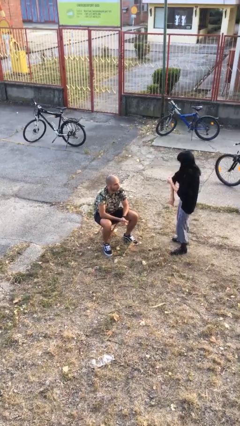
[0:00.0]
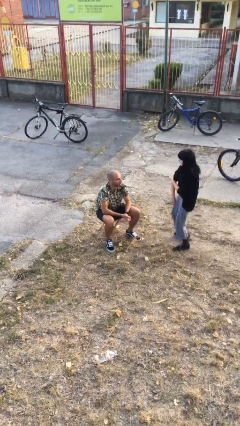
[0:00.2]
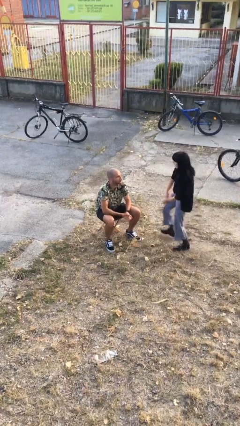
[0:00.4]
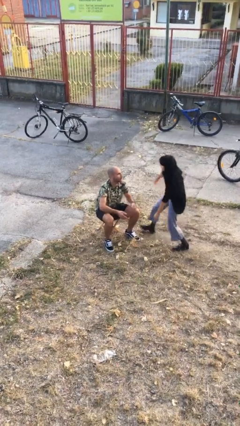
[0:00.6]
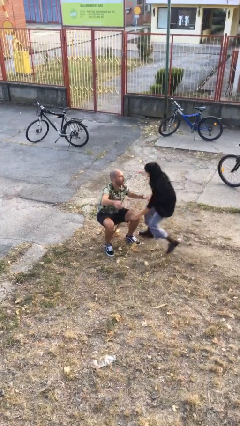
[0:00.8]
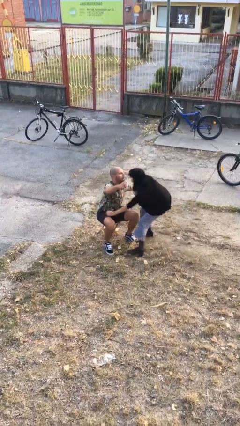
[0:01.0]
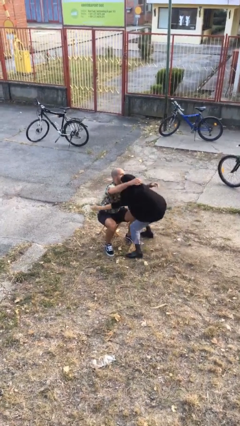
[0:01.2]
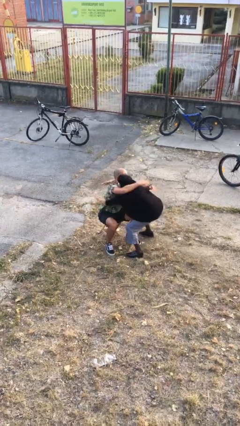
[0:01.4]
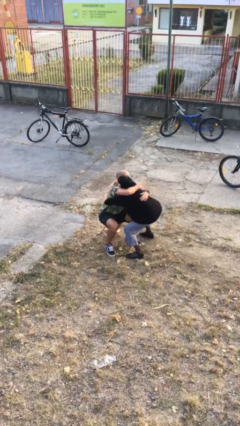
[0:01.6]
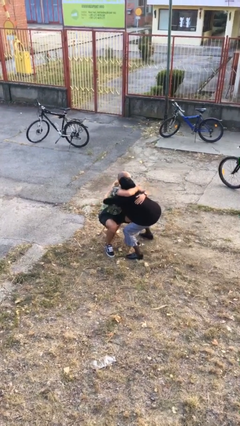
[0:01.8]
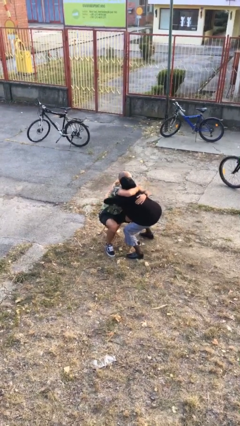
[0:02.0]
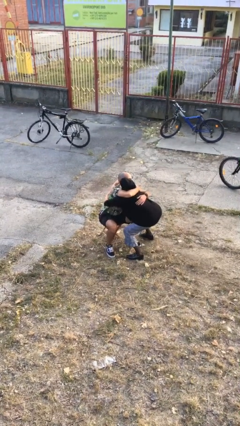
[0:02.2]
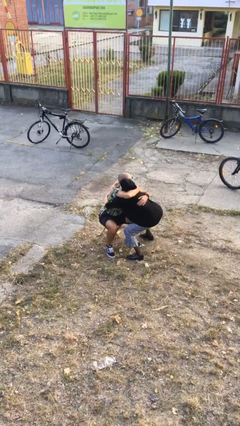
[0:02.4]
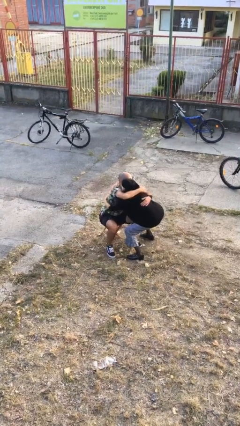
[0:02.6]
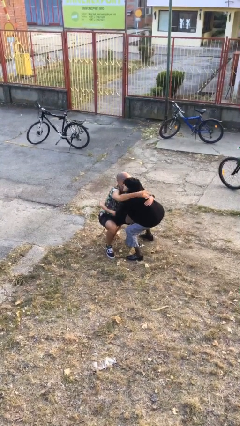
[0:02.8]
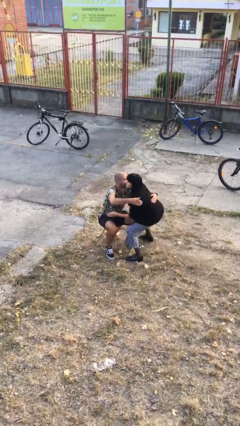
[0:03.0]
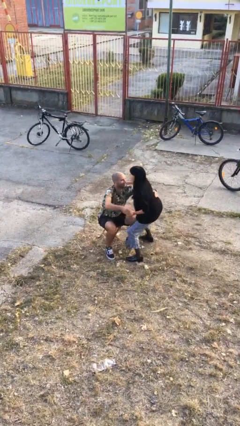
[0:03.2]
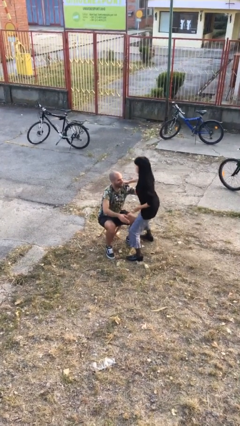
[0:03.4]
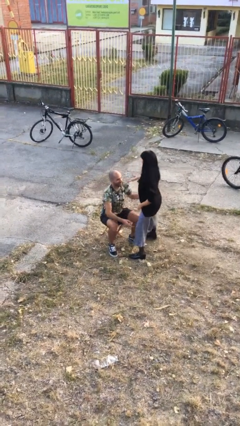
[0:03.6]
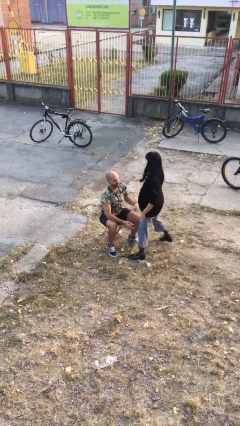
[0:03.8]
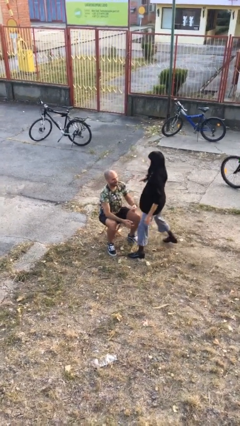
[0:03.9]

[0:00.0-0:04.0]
person embraces person

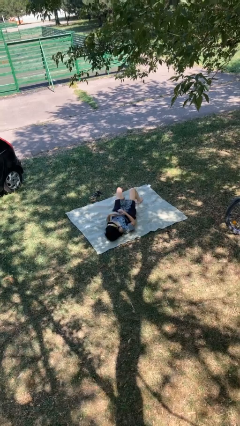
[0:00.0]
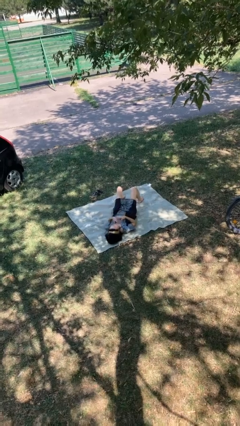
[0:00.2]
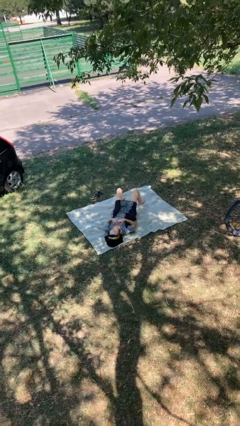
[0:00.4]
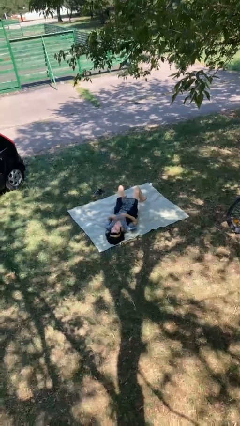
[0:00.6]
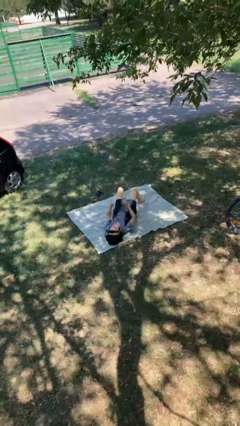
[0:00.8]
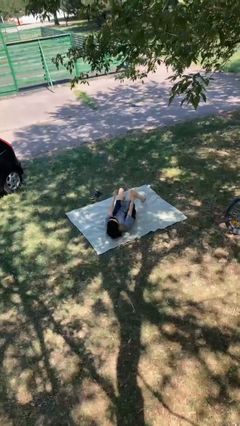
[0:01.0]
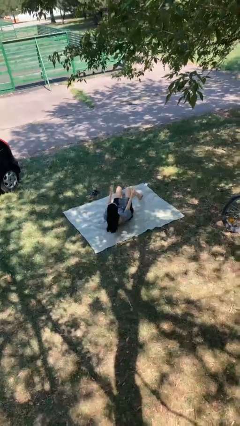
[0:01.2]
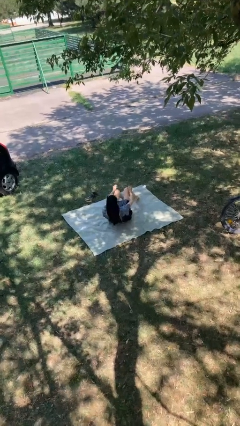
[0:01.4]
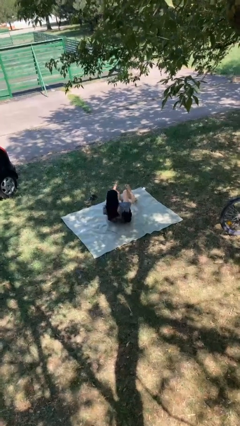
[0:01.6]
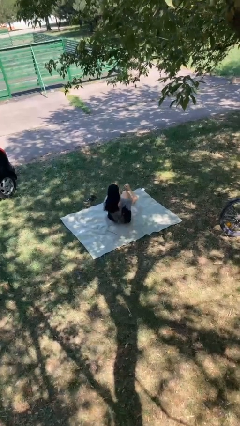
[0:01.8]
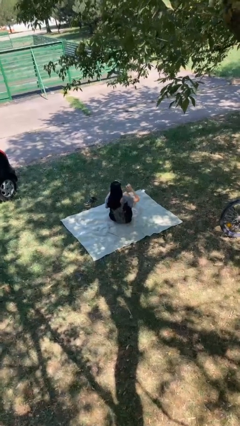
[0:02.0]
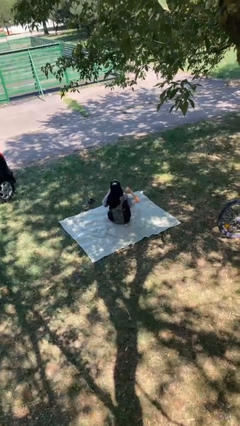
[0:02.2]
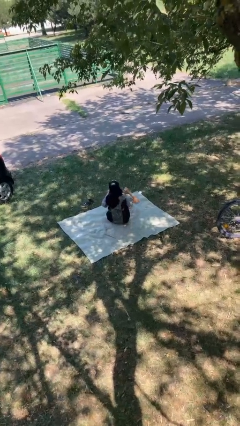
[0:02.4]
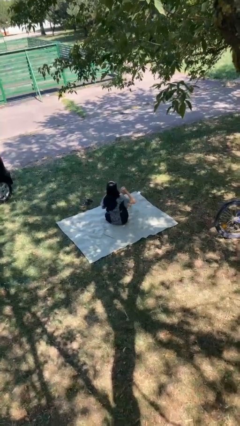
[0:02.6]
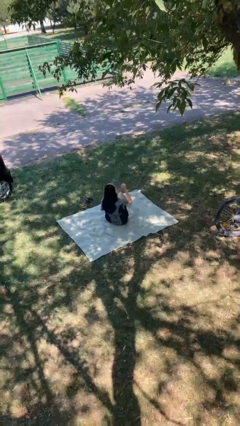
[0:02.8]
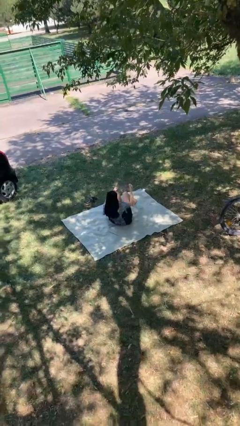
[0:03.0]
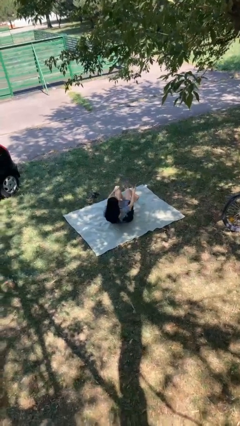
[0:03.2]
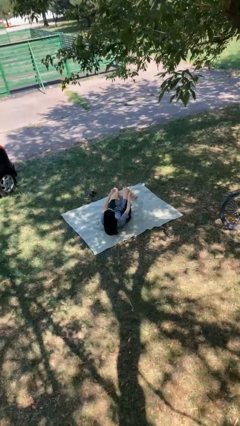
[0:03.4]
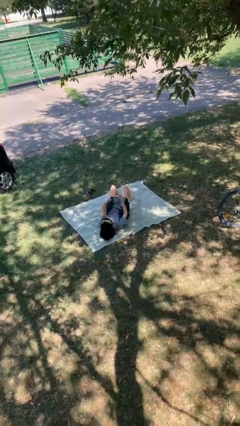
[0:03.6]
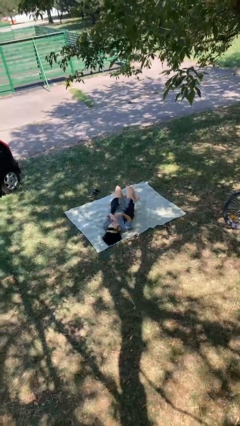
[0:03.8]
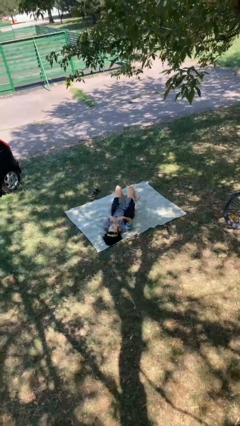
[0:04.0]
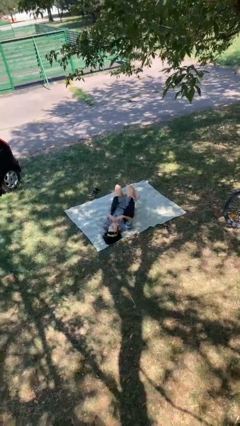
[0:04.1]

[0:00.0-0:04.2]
person exercises with situp

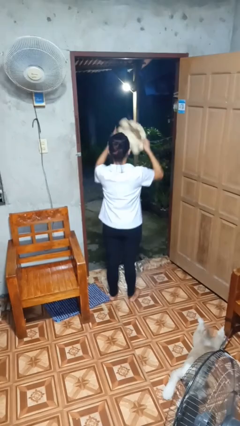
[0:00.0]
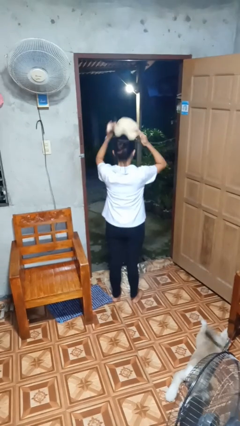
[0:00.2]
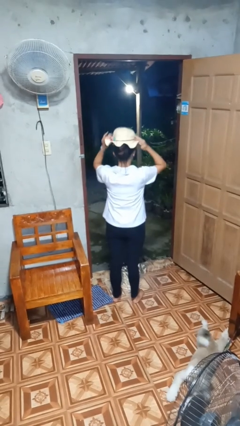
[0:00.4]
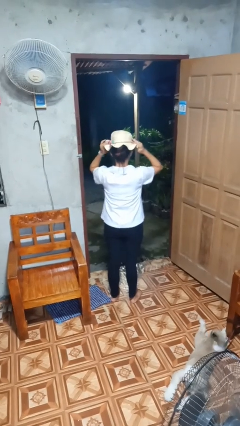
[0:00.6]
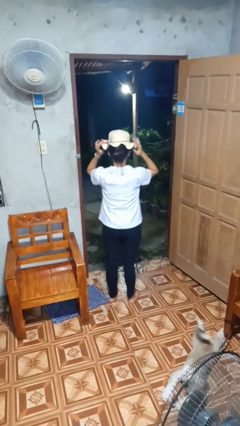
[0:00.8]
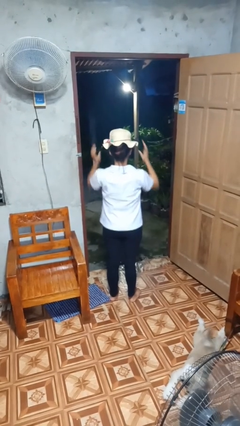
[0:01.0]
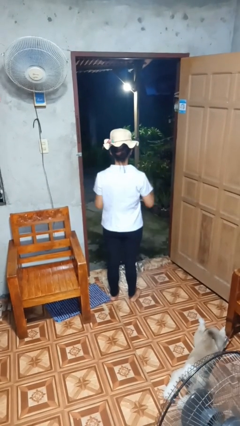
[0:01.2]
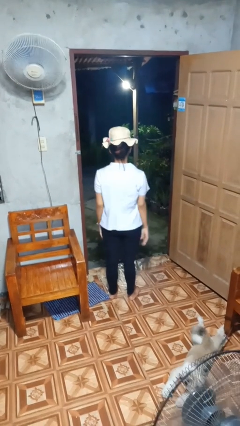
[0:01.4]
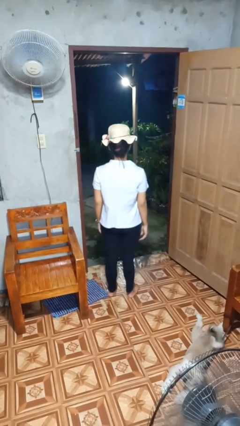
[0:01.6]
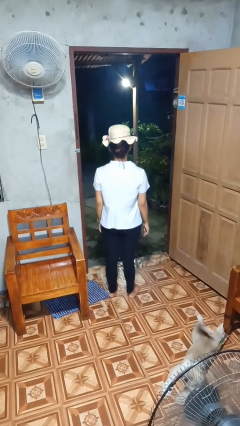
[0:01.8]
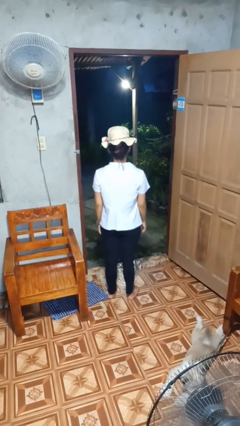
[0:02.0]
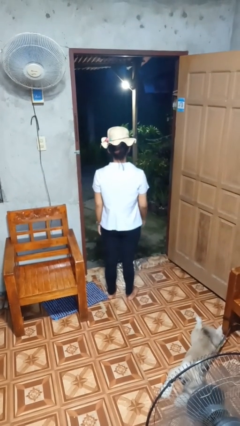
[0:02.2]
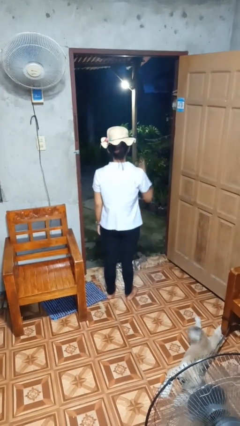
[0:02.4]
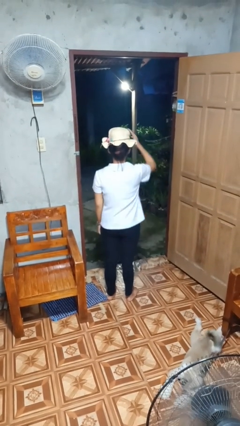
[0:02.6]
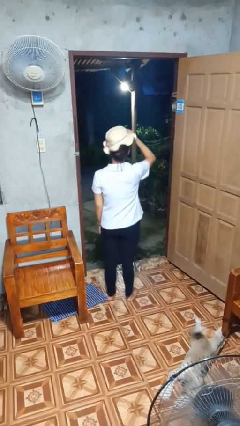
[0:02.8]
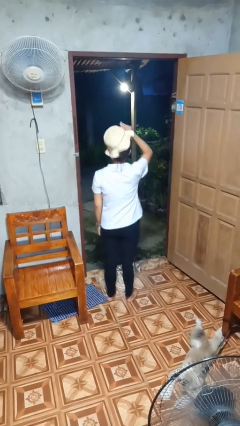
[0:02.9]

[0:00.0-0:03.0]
person puts on hat

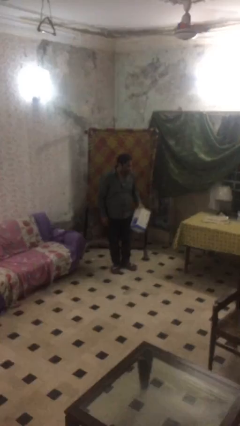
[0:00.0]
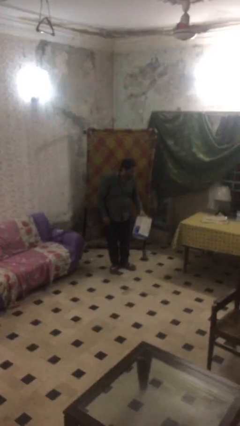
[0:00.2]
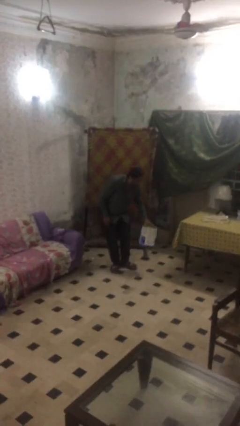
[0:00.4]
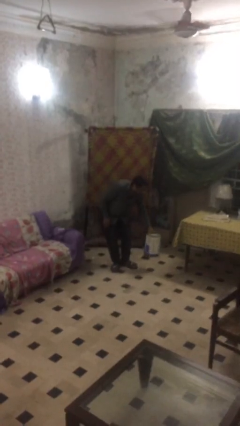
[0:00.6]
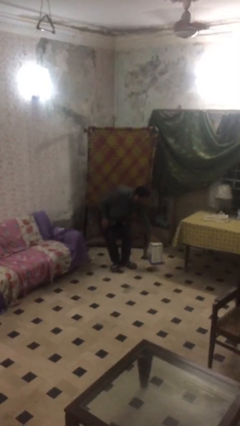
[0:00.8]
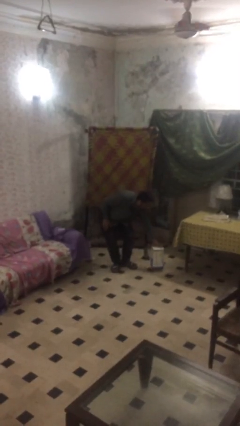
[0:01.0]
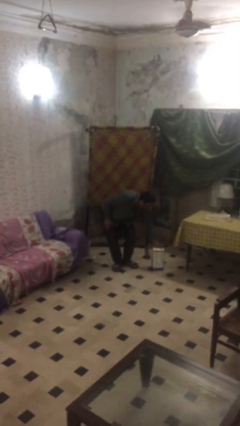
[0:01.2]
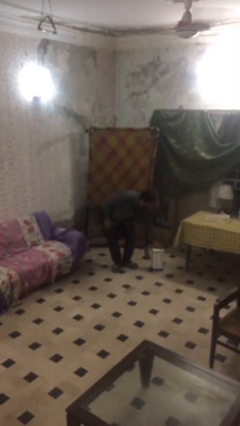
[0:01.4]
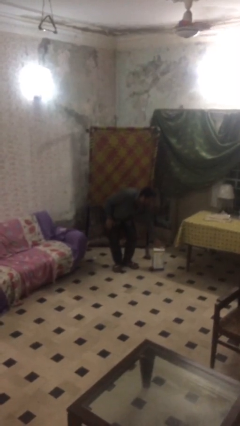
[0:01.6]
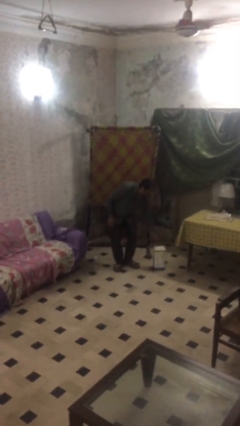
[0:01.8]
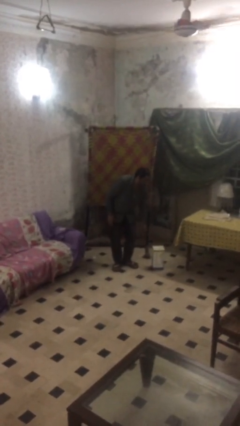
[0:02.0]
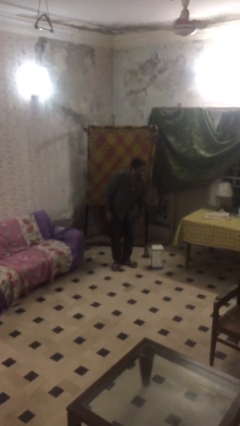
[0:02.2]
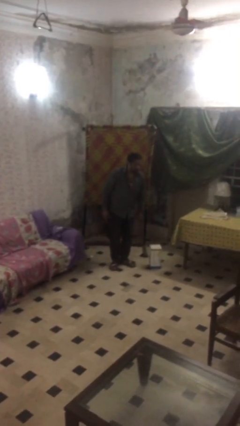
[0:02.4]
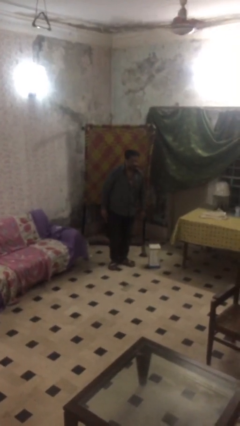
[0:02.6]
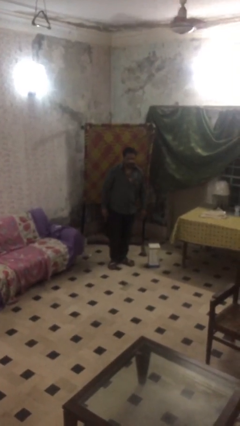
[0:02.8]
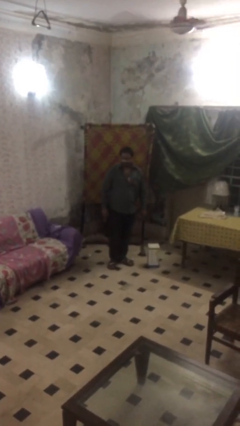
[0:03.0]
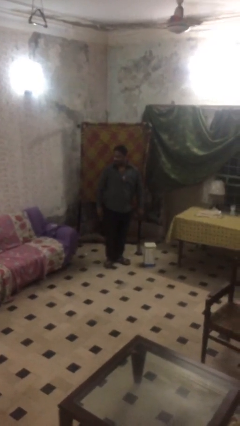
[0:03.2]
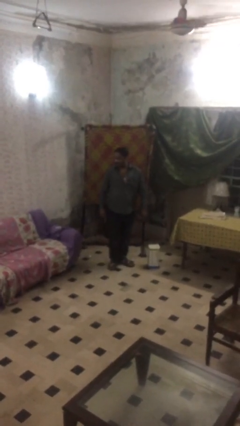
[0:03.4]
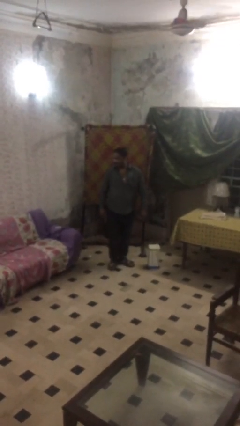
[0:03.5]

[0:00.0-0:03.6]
person puts down object on floor

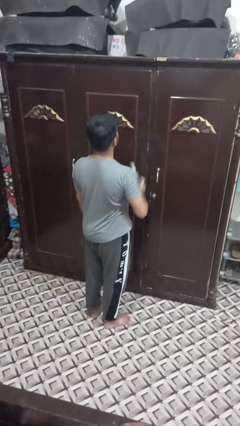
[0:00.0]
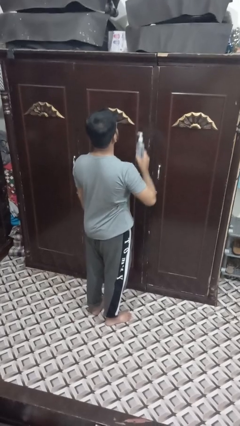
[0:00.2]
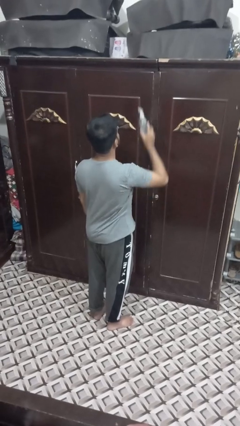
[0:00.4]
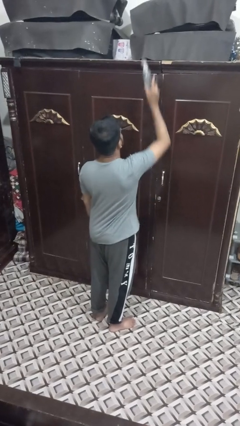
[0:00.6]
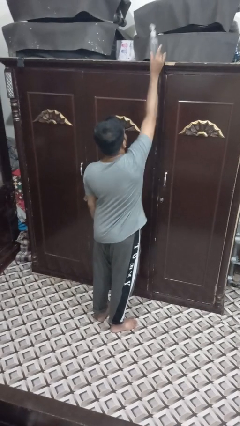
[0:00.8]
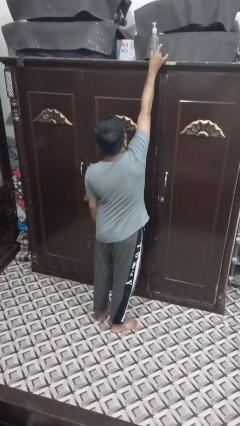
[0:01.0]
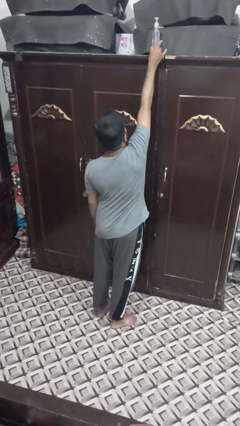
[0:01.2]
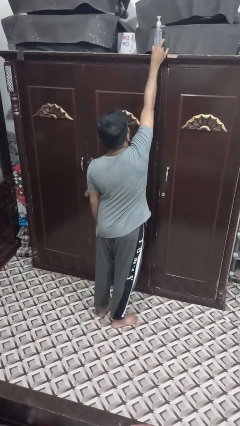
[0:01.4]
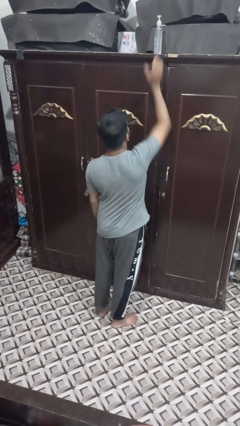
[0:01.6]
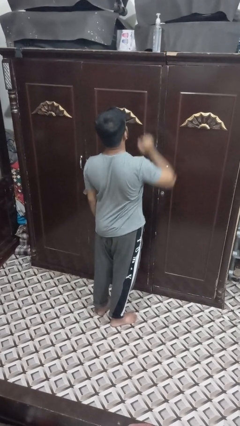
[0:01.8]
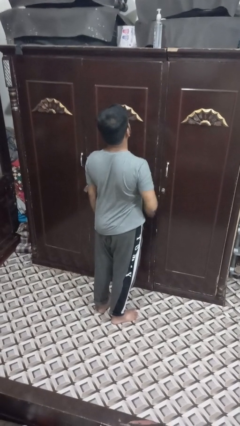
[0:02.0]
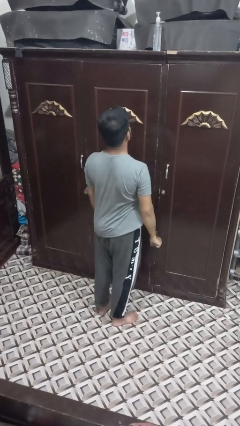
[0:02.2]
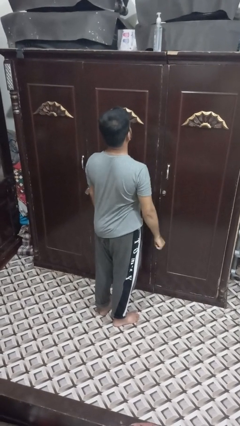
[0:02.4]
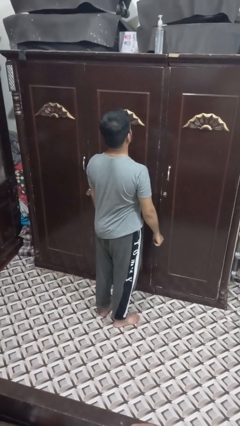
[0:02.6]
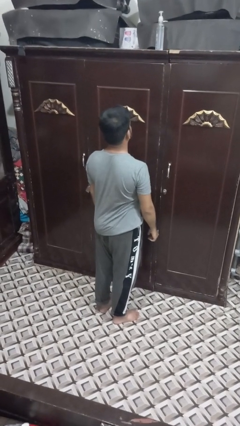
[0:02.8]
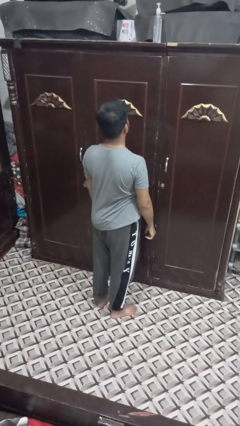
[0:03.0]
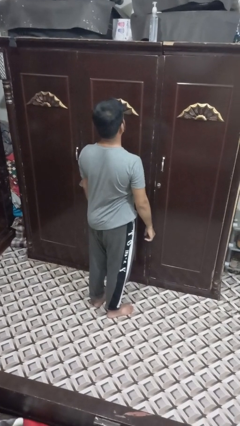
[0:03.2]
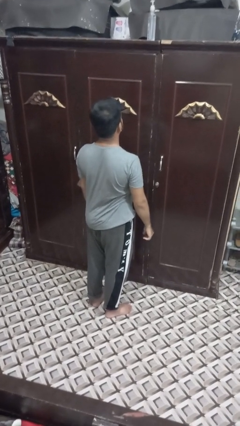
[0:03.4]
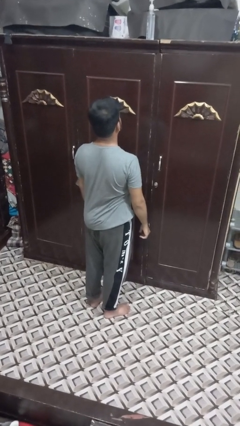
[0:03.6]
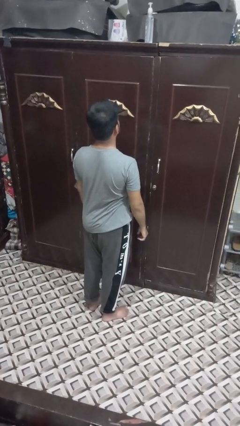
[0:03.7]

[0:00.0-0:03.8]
person puts down object on shelf
